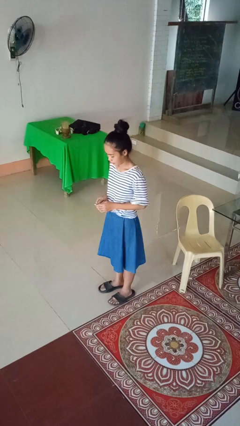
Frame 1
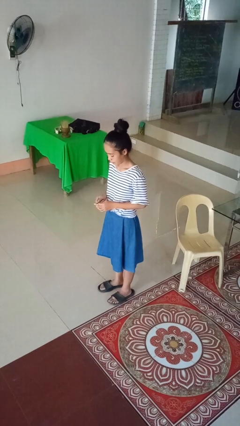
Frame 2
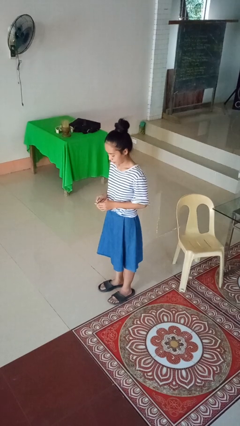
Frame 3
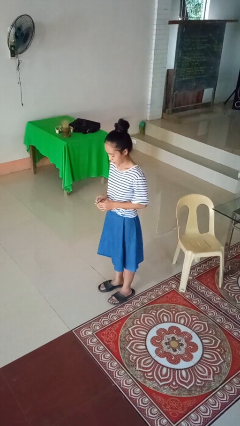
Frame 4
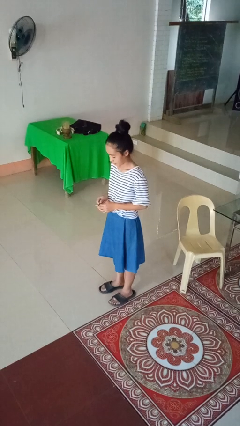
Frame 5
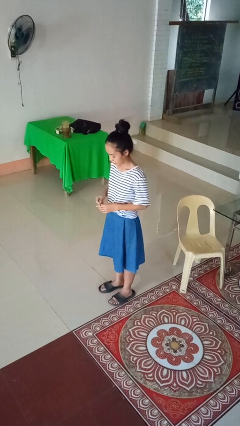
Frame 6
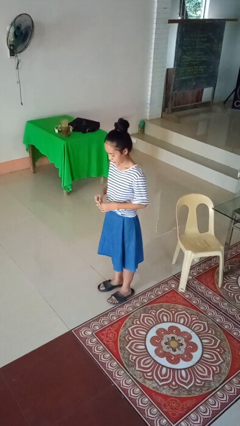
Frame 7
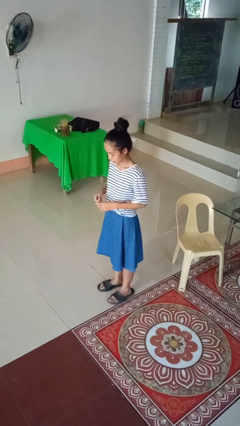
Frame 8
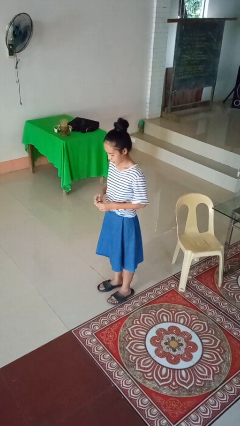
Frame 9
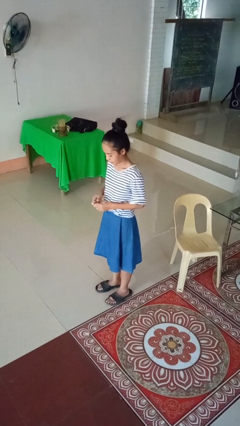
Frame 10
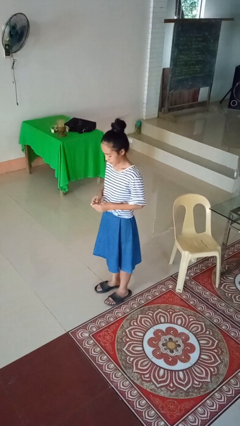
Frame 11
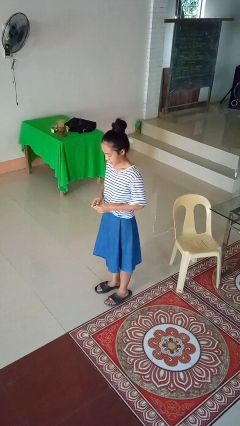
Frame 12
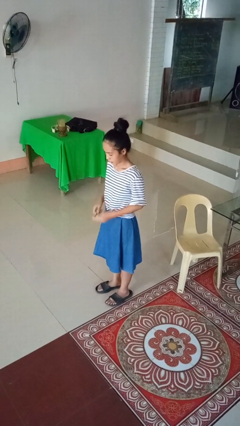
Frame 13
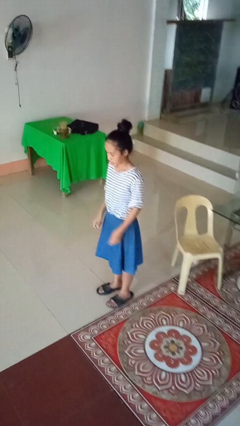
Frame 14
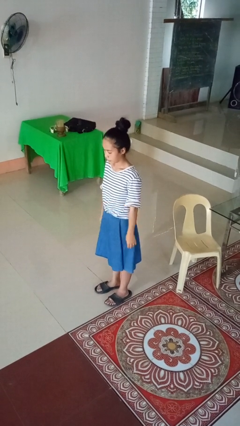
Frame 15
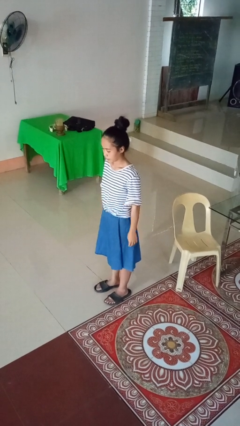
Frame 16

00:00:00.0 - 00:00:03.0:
person files fingernails

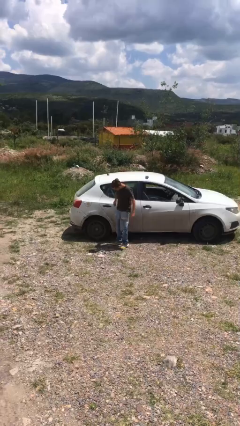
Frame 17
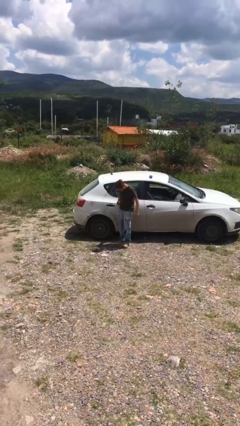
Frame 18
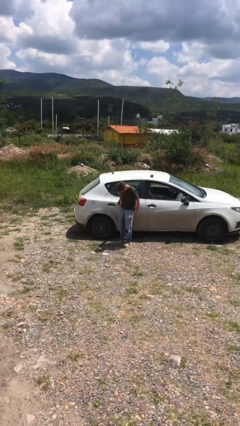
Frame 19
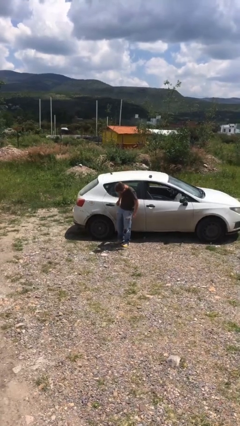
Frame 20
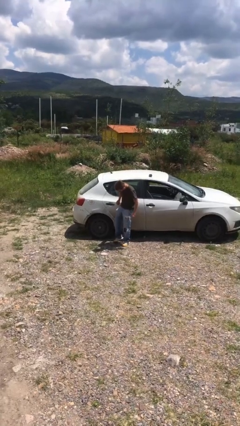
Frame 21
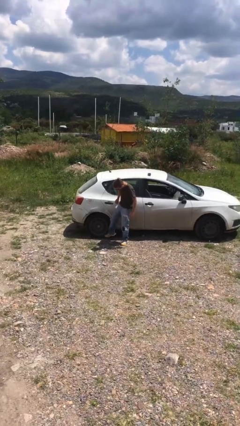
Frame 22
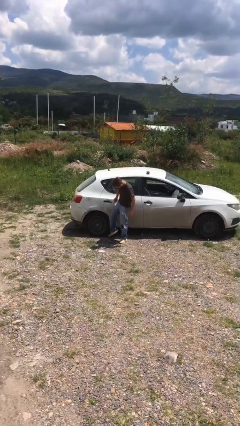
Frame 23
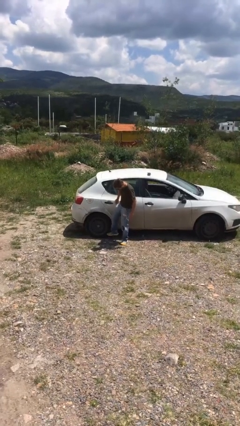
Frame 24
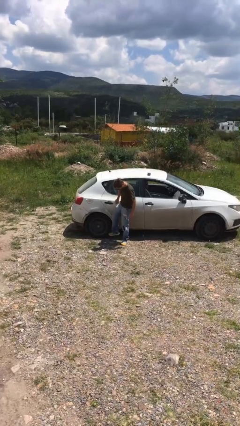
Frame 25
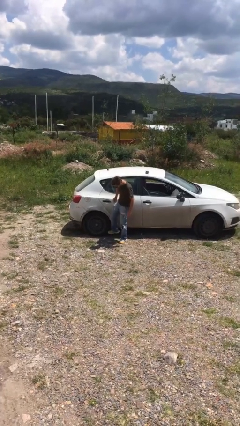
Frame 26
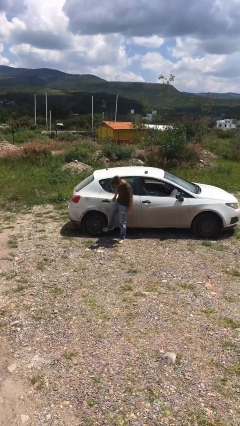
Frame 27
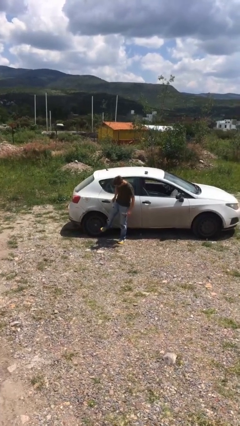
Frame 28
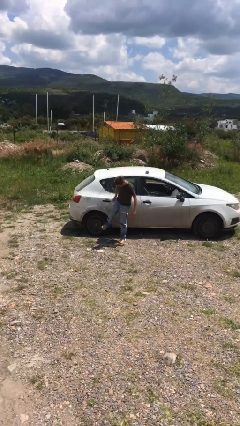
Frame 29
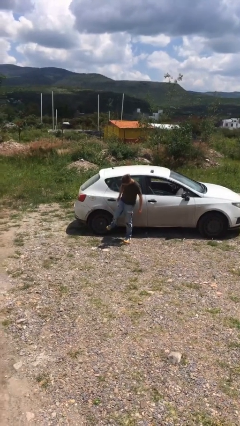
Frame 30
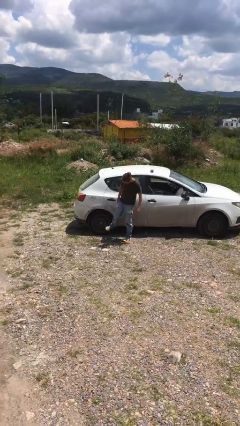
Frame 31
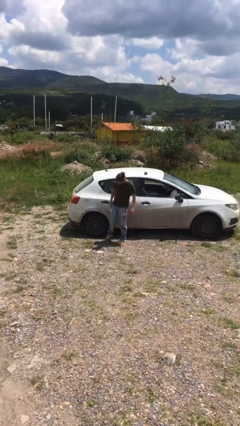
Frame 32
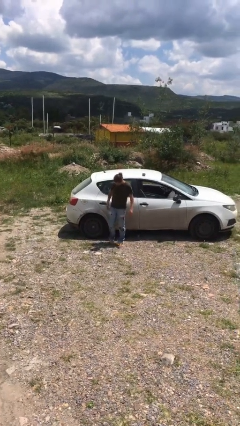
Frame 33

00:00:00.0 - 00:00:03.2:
person kicks car tires

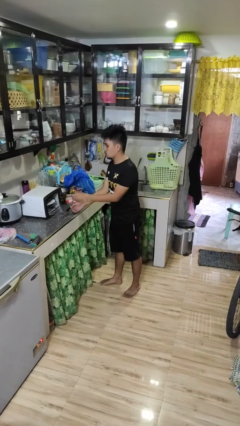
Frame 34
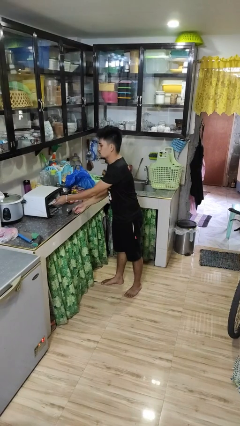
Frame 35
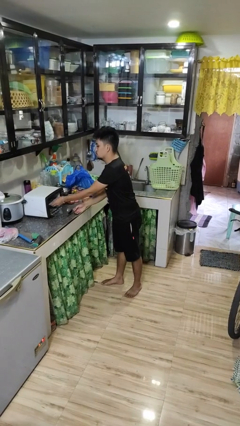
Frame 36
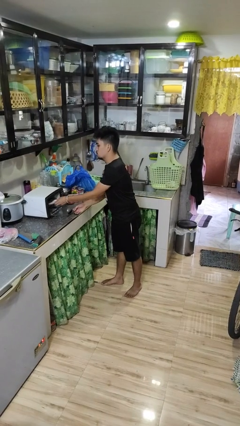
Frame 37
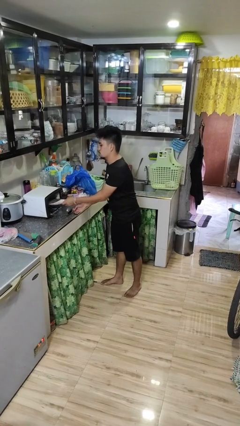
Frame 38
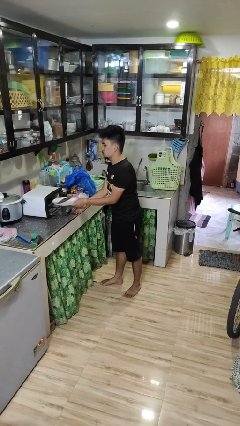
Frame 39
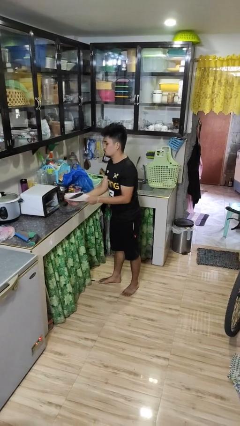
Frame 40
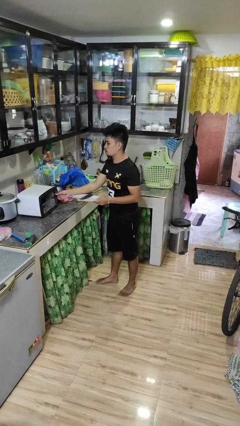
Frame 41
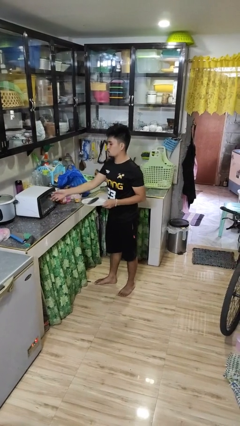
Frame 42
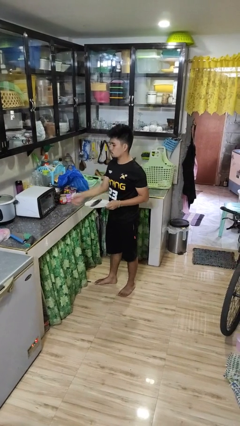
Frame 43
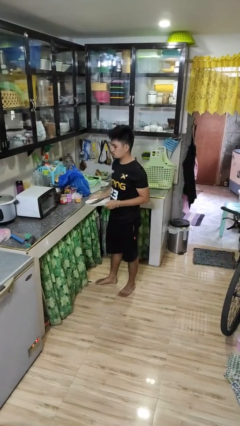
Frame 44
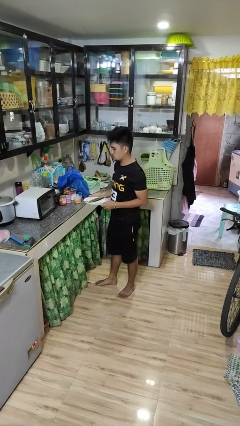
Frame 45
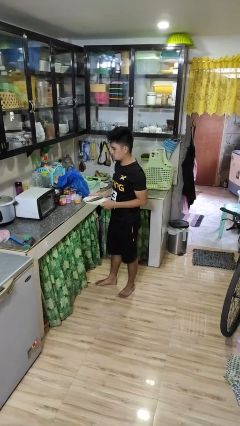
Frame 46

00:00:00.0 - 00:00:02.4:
person takes object from microwave

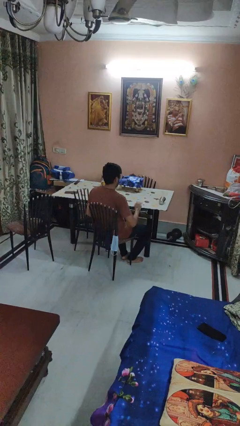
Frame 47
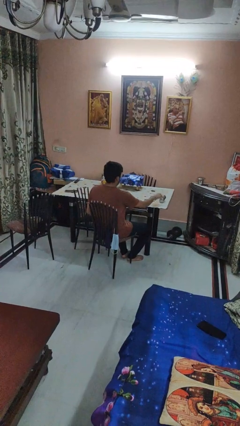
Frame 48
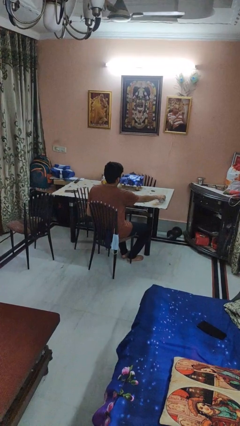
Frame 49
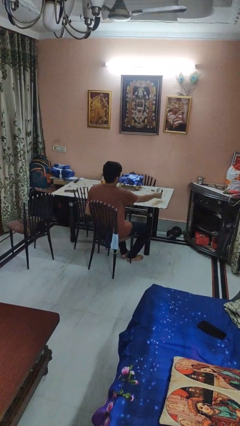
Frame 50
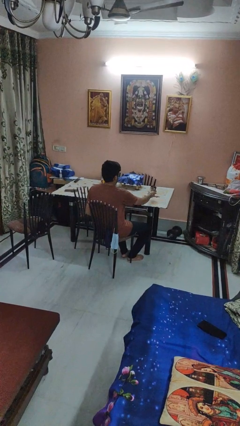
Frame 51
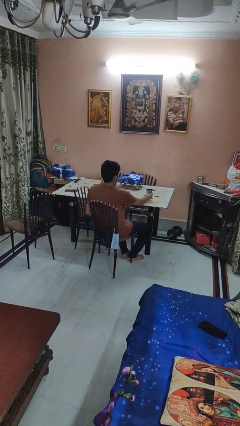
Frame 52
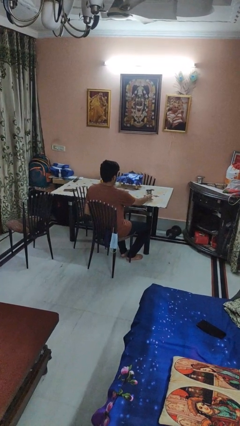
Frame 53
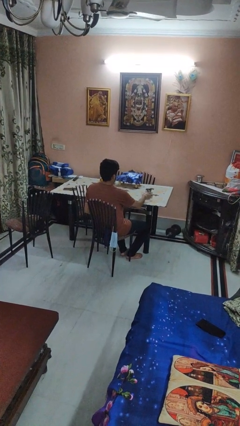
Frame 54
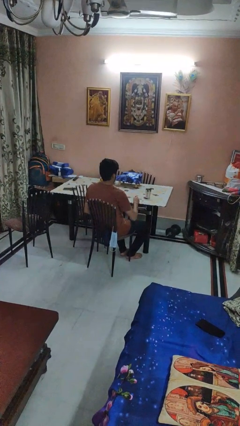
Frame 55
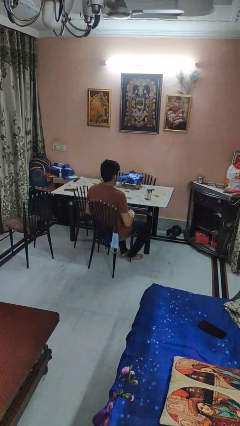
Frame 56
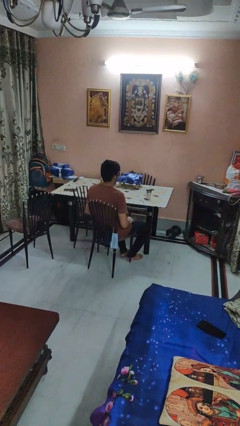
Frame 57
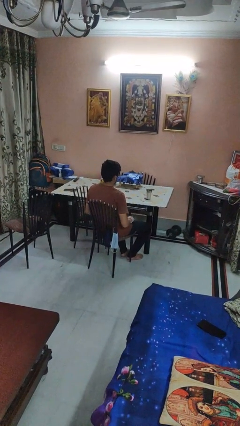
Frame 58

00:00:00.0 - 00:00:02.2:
person sets upright glass

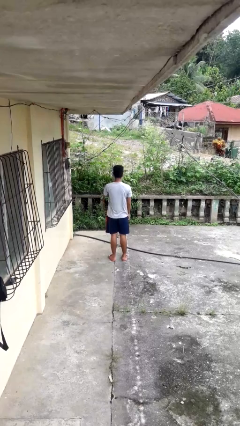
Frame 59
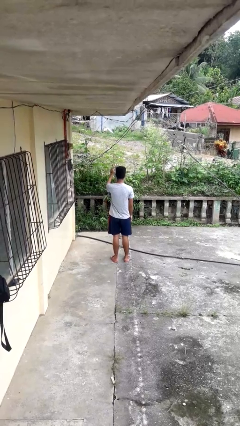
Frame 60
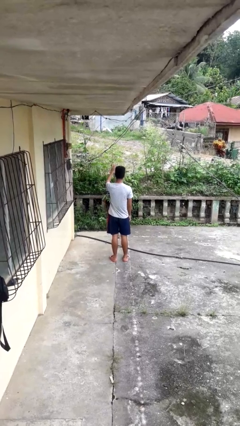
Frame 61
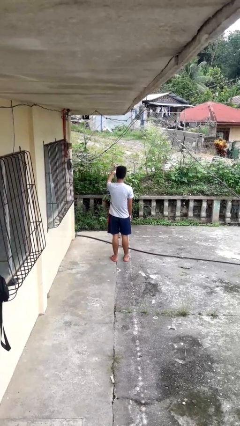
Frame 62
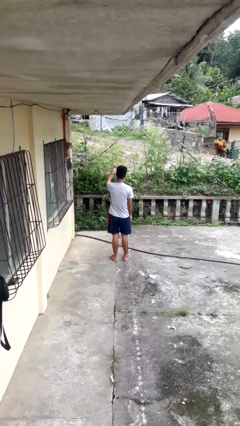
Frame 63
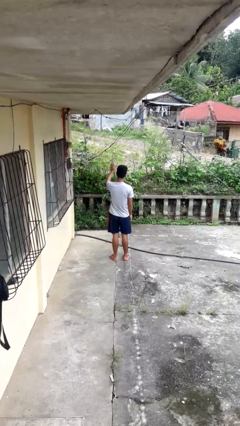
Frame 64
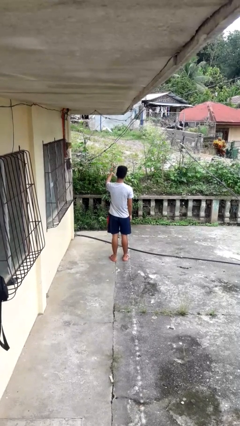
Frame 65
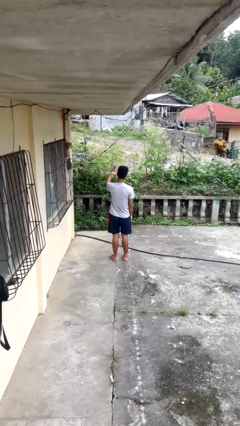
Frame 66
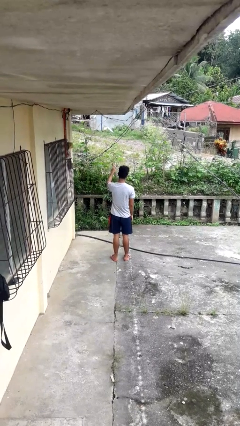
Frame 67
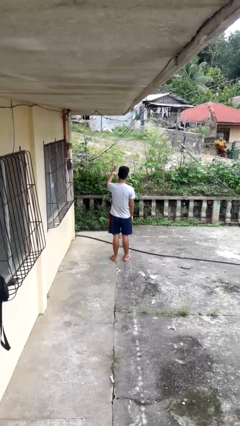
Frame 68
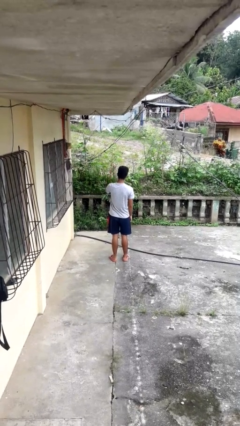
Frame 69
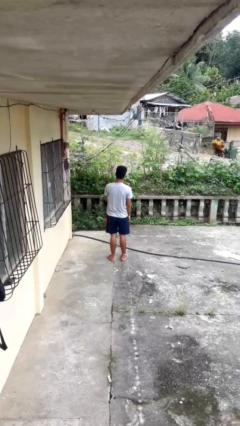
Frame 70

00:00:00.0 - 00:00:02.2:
person gestures come here

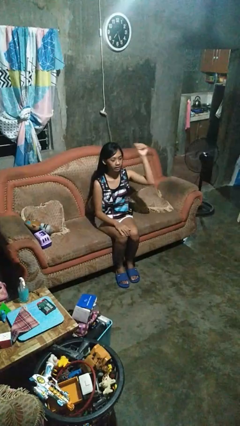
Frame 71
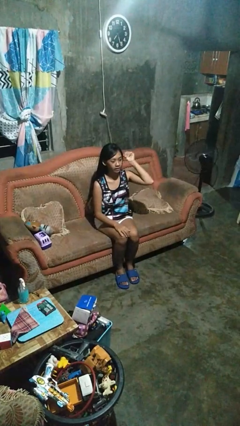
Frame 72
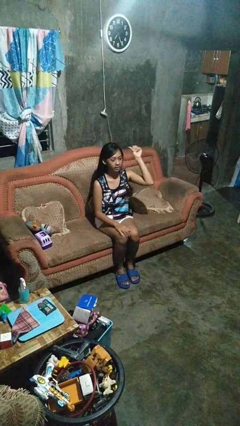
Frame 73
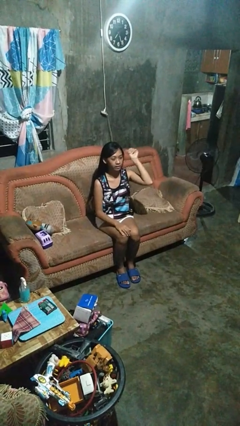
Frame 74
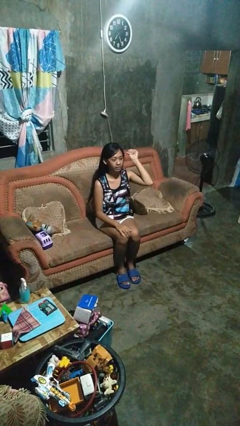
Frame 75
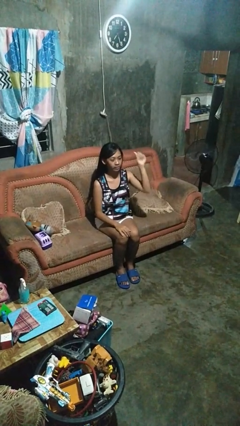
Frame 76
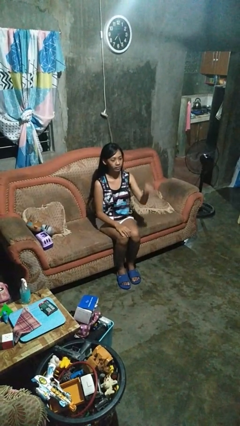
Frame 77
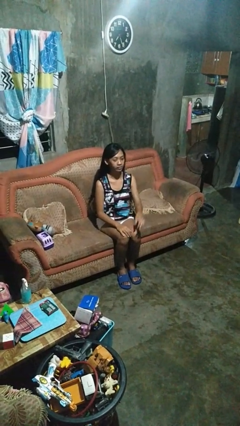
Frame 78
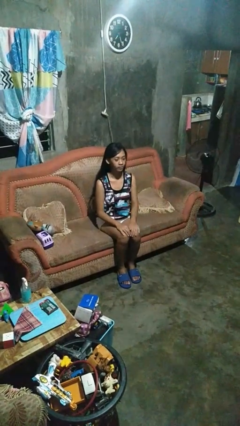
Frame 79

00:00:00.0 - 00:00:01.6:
person gestures behind me

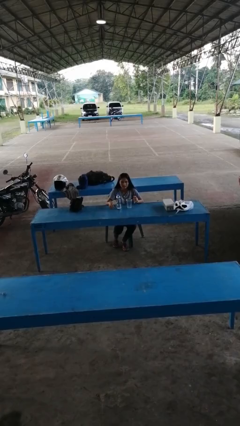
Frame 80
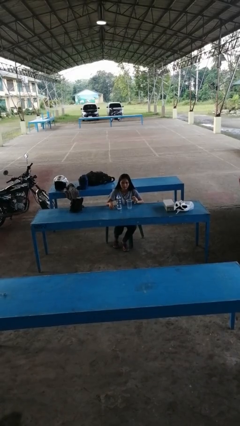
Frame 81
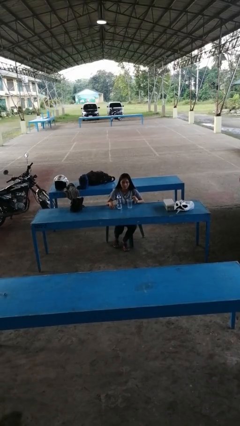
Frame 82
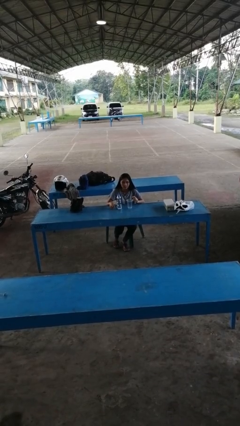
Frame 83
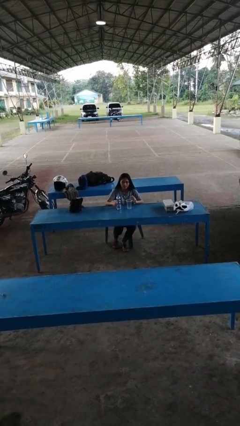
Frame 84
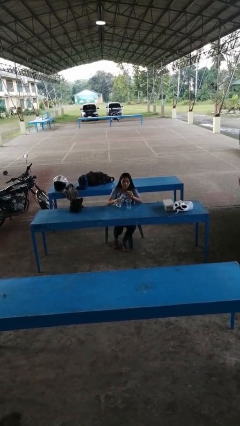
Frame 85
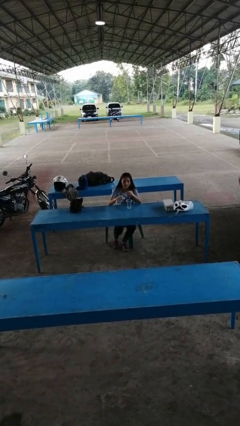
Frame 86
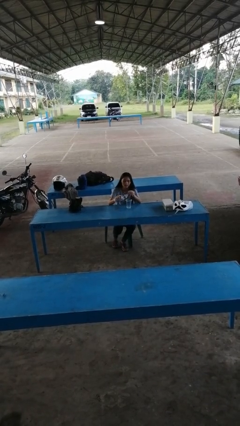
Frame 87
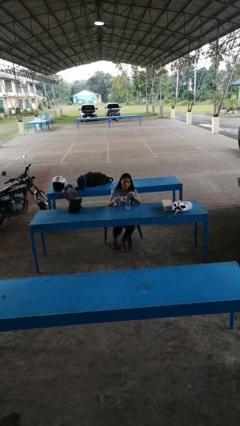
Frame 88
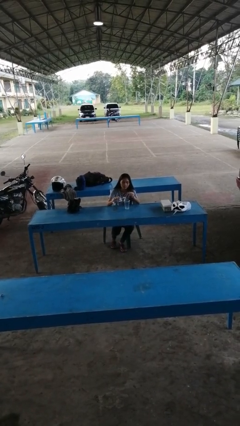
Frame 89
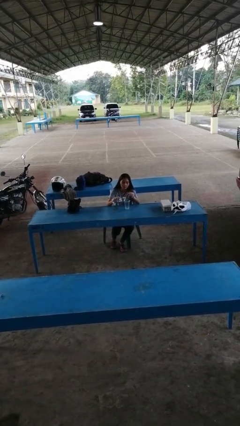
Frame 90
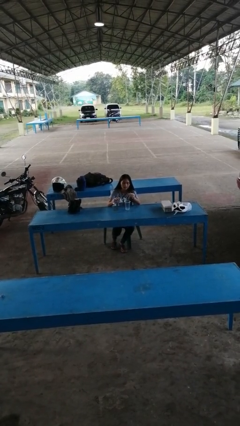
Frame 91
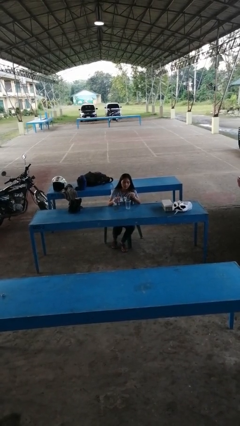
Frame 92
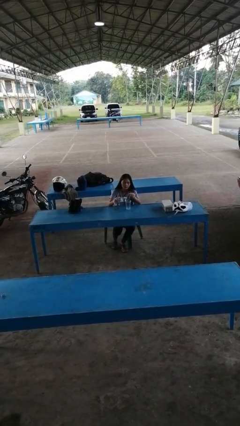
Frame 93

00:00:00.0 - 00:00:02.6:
person pours liquid into cup
